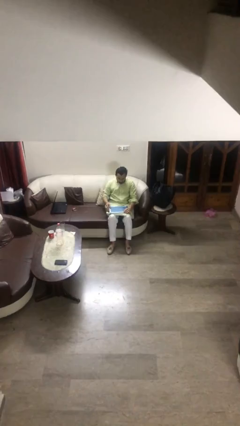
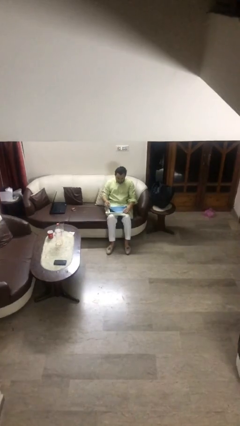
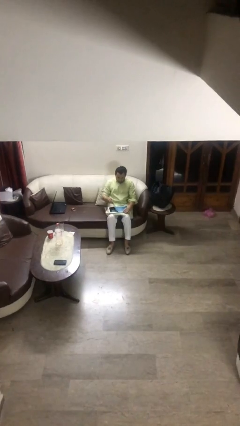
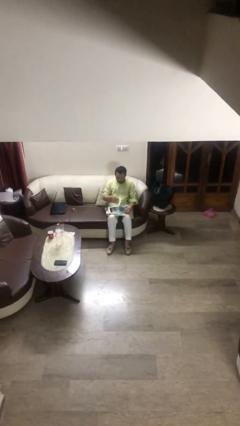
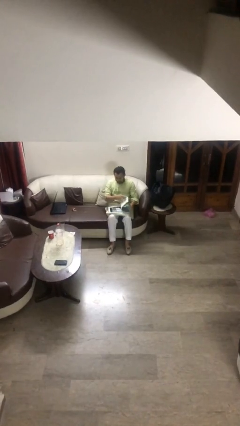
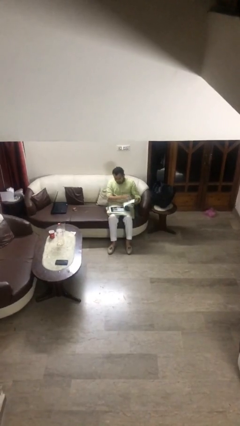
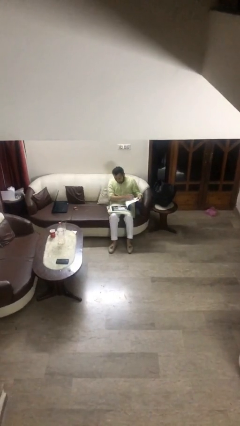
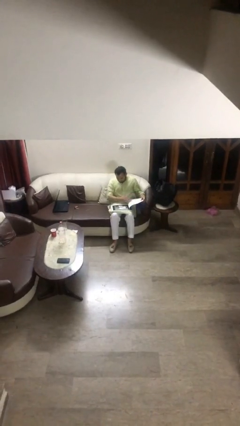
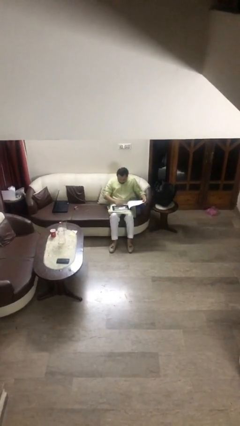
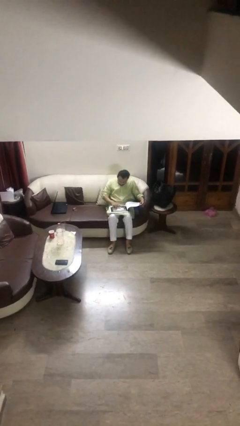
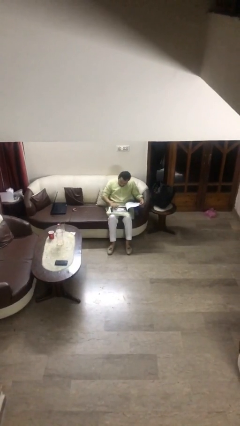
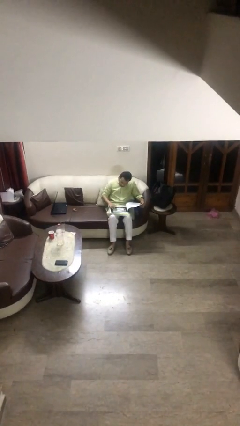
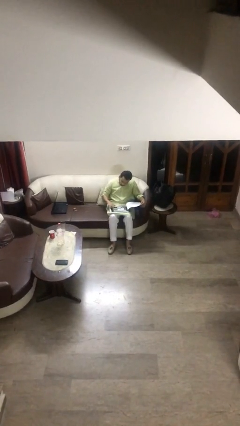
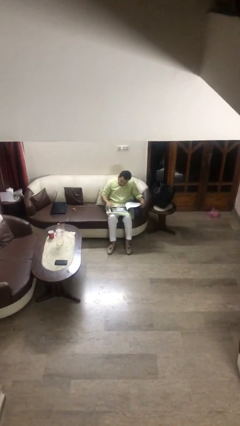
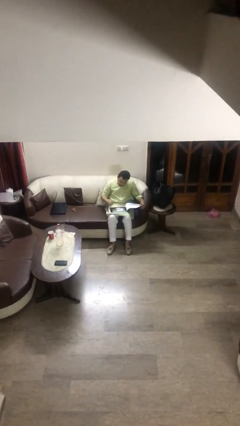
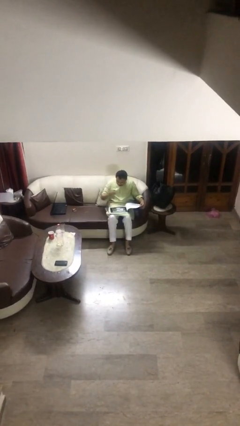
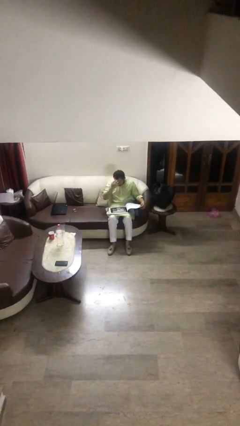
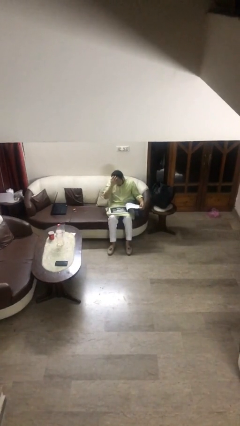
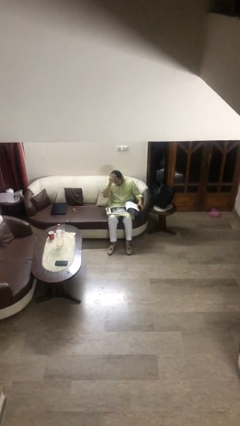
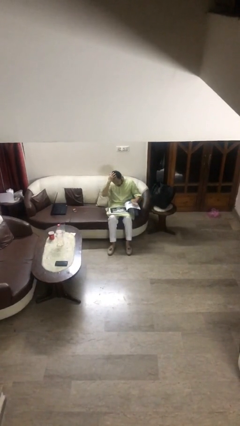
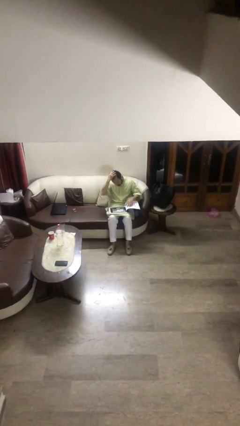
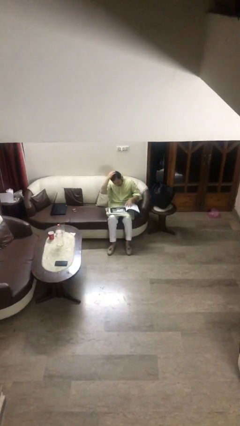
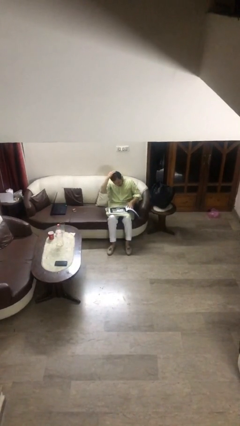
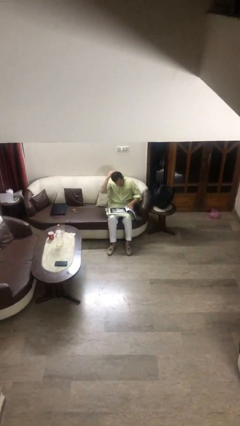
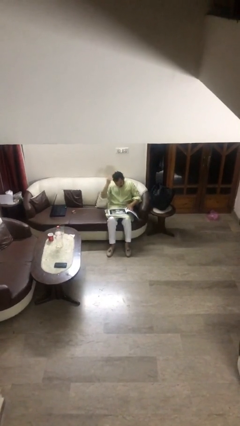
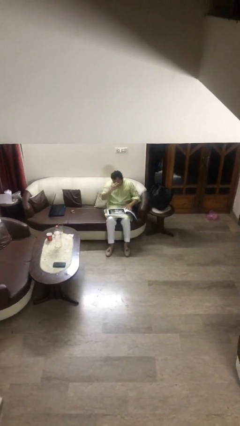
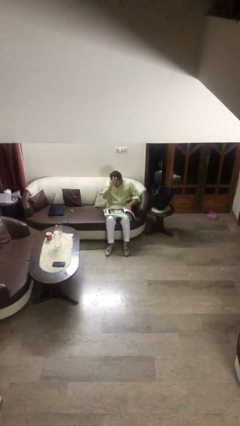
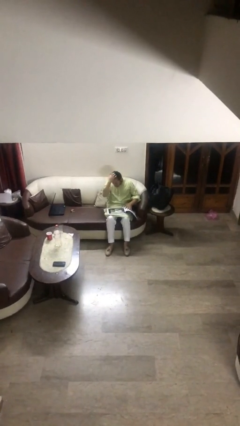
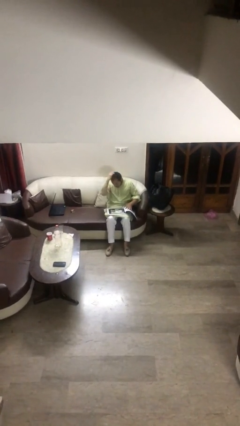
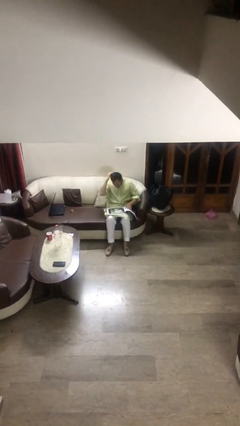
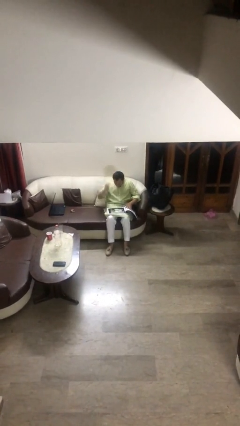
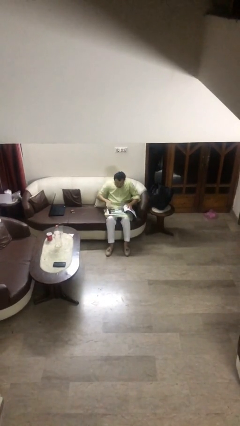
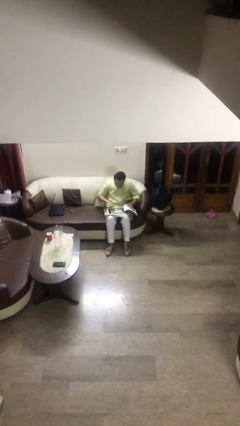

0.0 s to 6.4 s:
person reads document

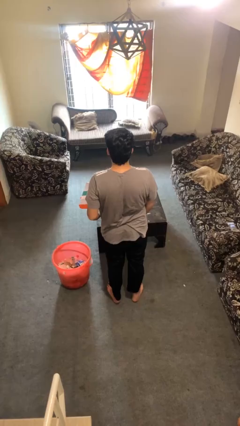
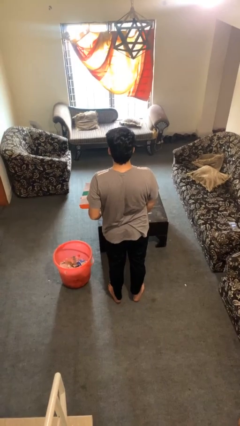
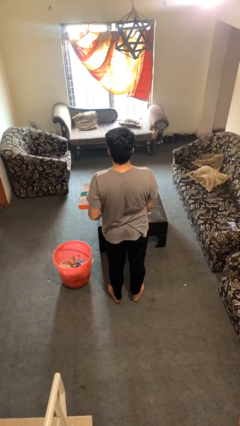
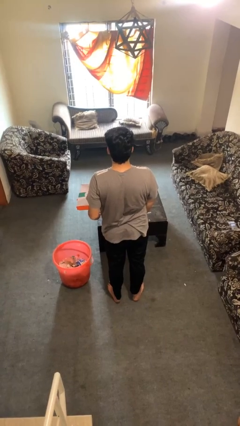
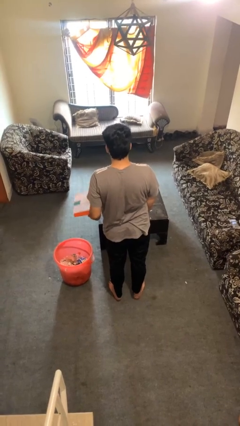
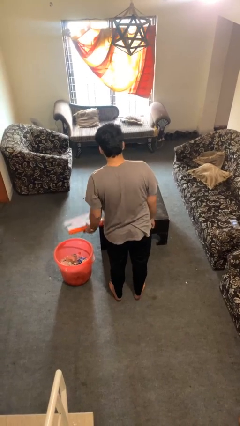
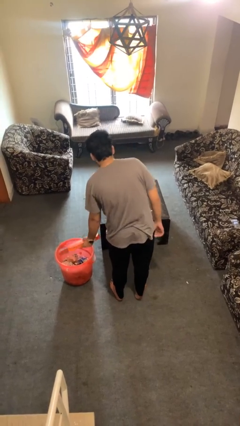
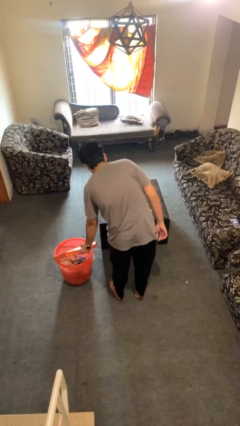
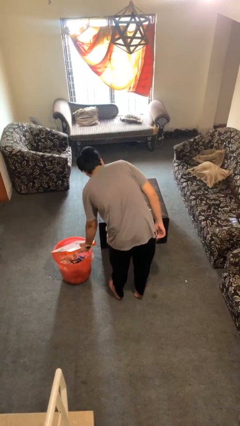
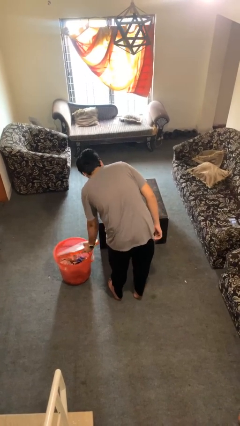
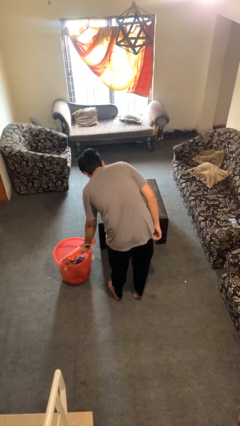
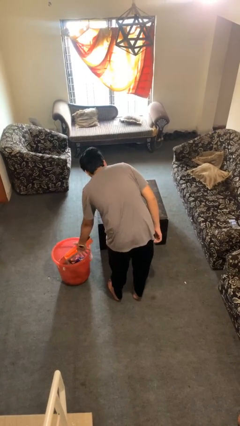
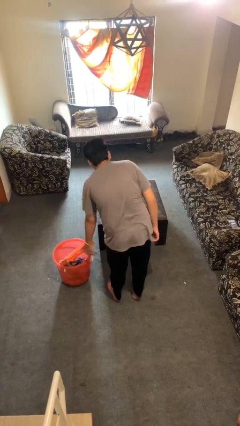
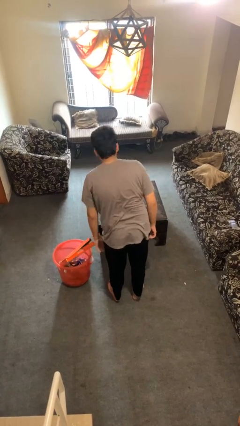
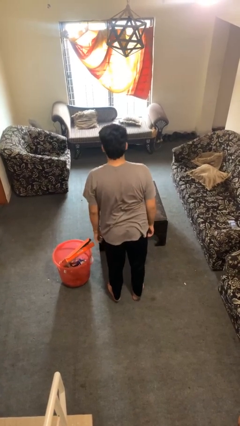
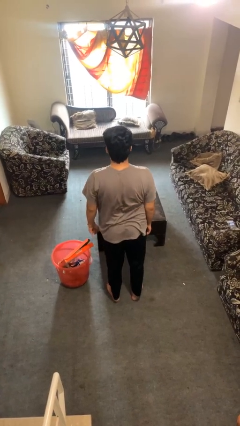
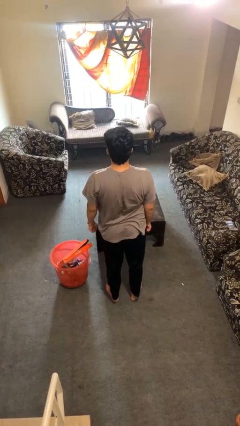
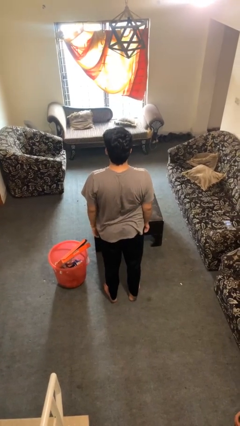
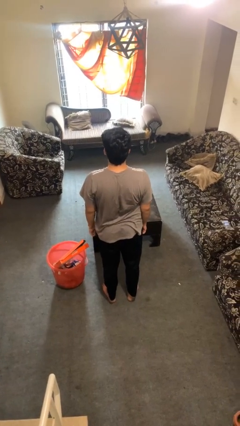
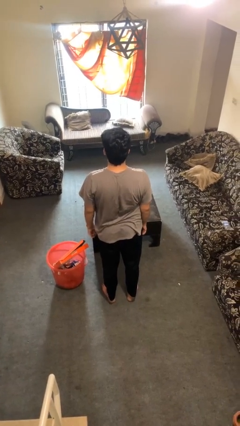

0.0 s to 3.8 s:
person puts object into basket

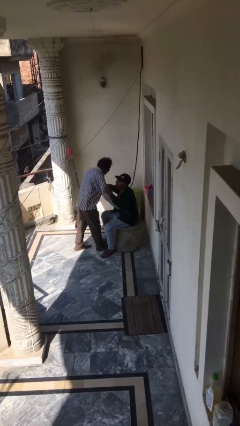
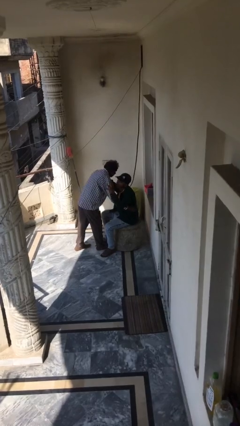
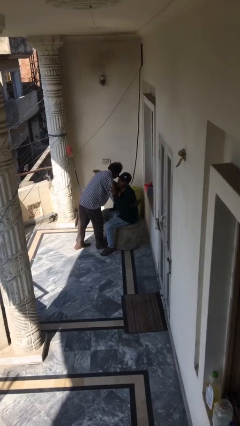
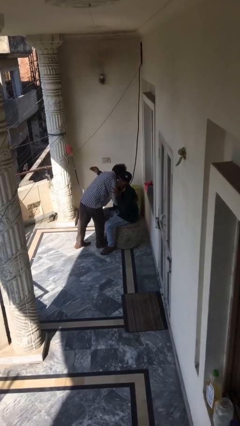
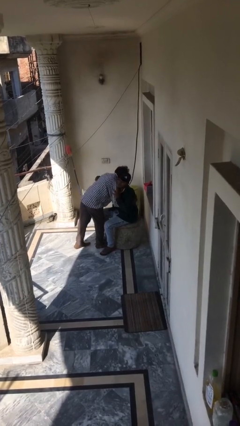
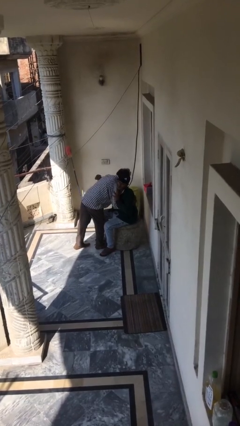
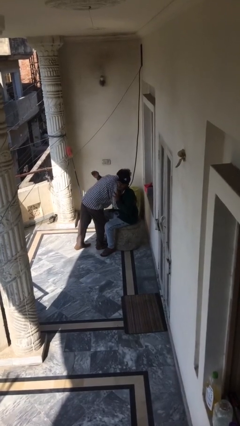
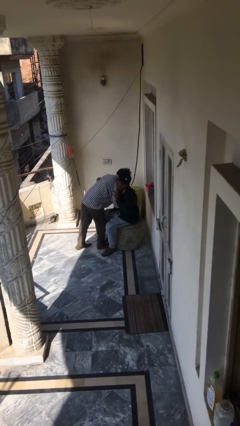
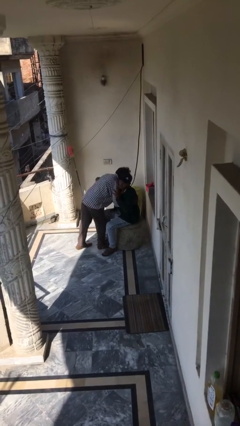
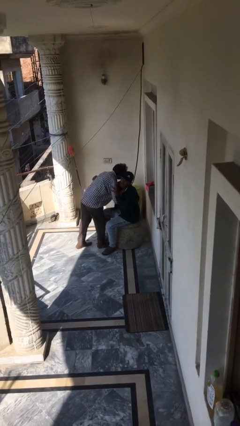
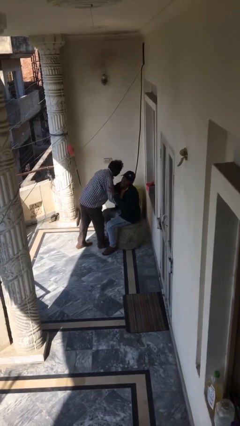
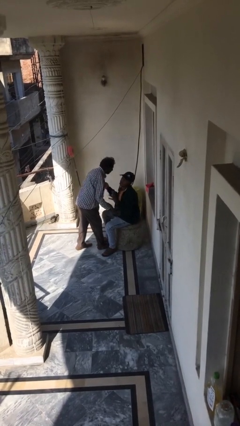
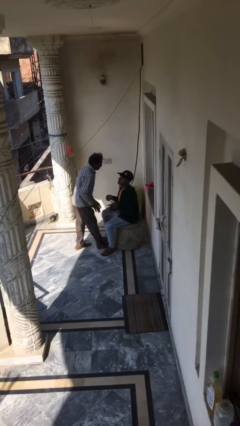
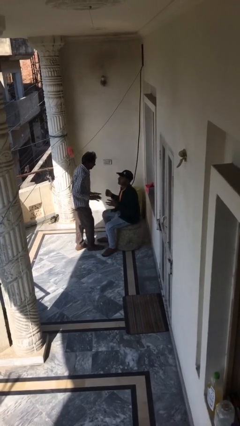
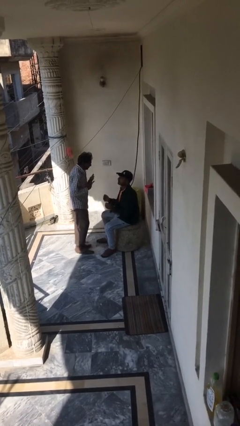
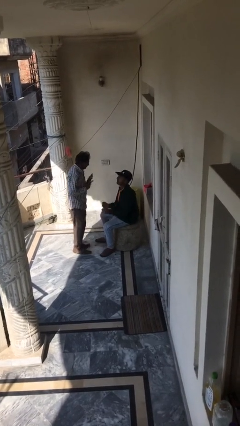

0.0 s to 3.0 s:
person embraces person

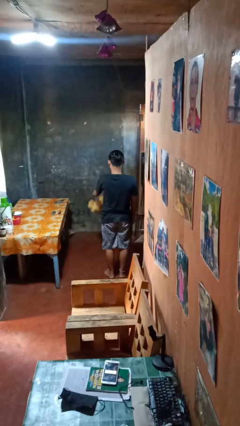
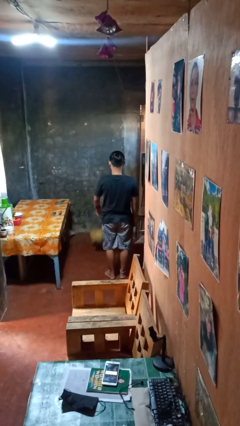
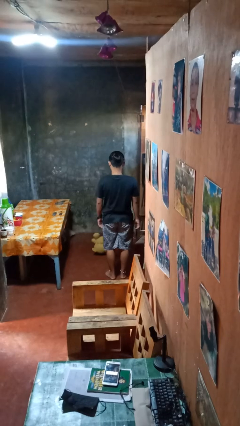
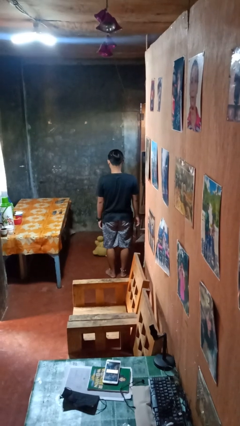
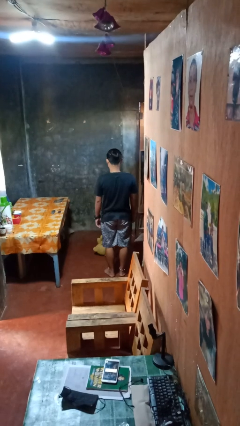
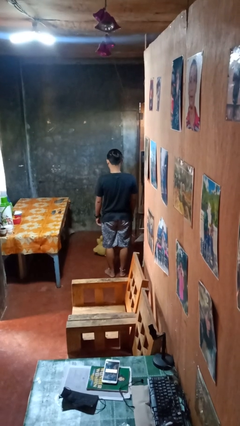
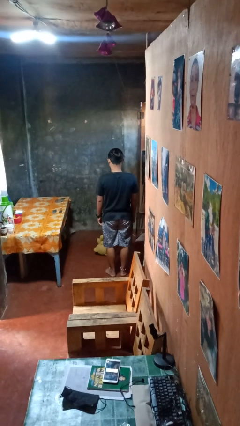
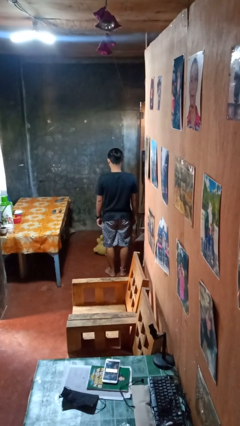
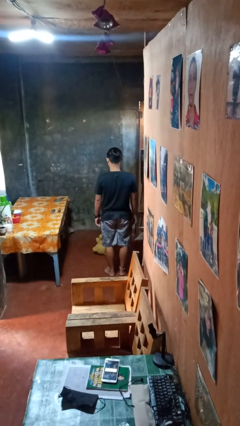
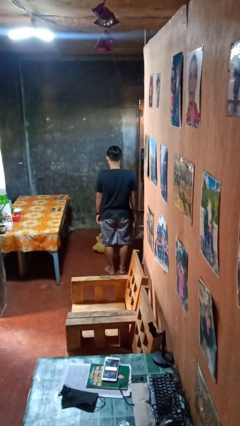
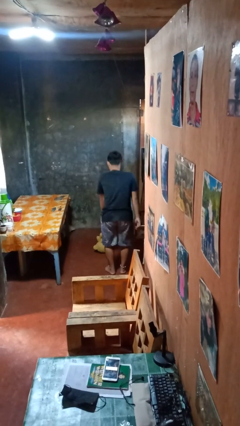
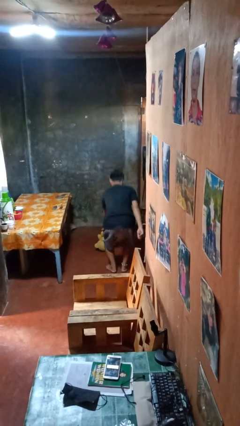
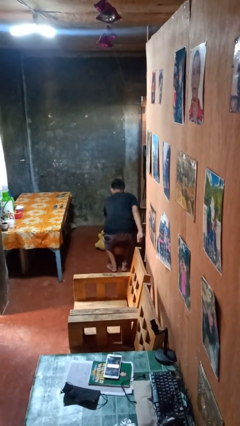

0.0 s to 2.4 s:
person throws object to ground

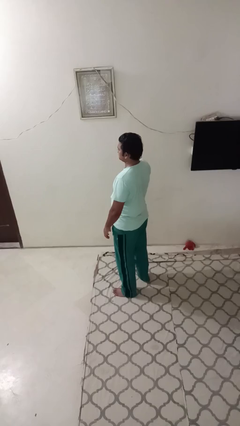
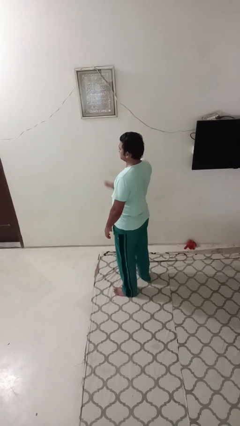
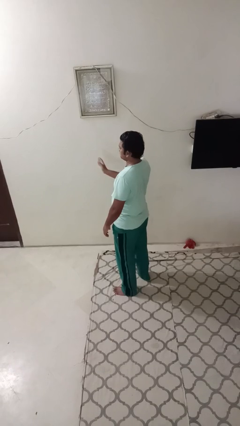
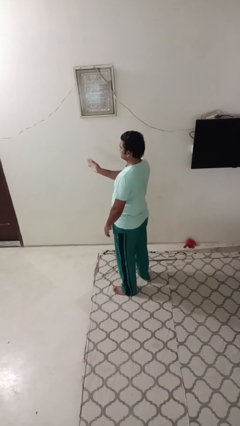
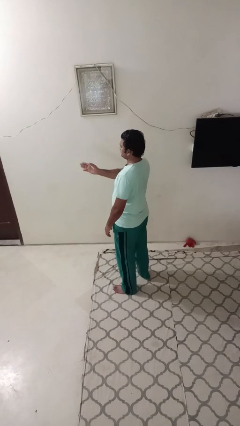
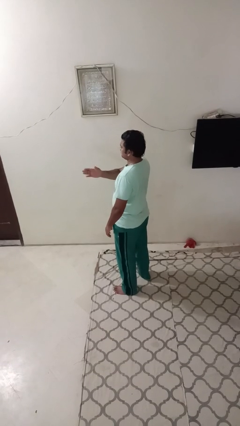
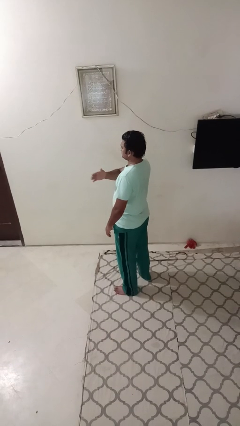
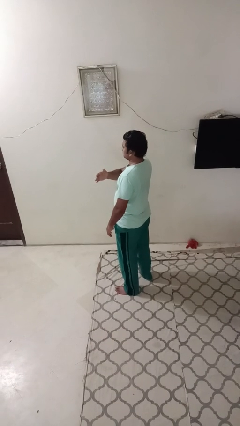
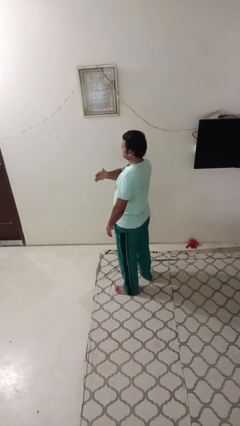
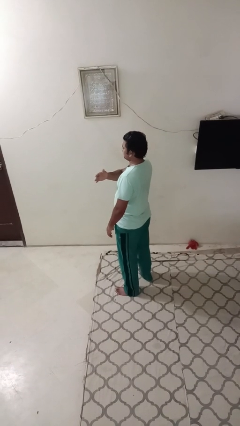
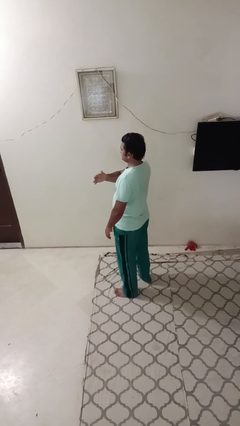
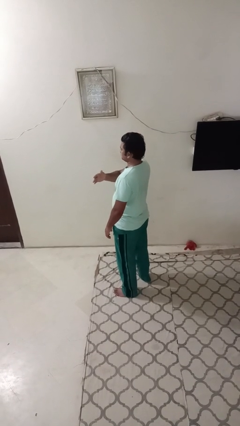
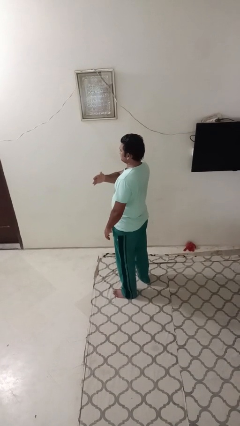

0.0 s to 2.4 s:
person gestures swipe left
